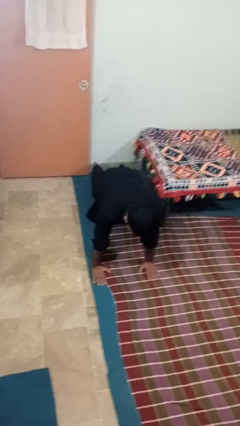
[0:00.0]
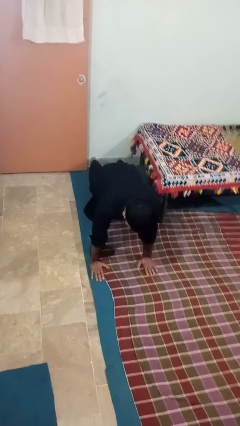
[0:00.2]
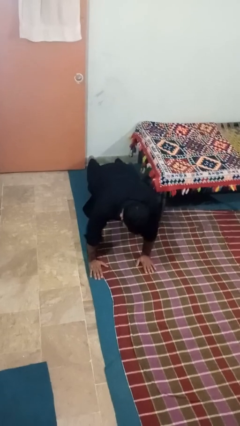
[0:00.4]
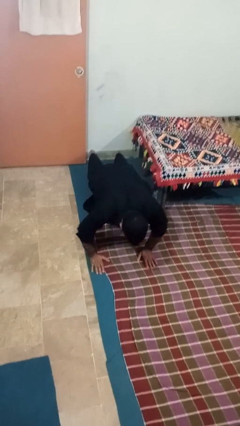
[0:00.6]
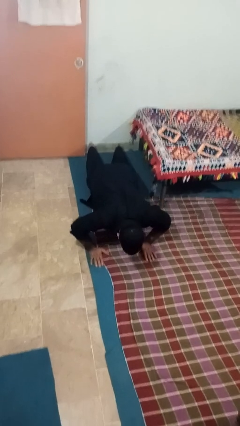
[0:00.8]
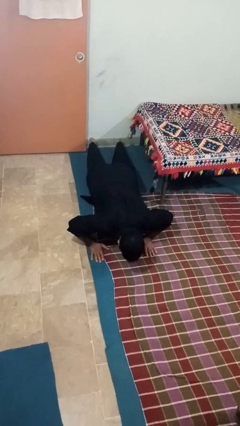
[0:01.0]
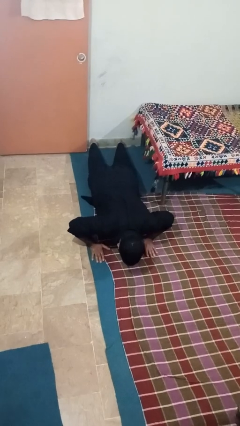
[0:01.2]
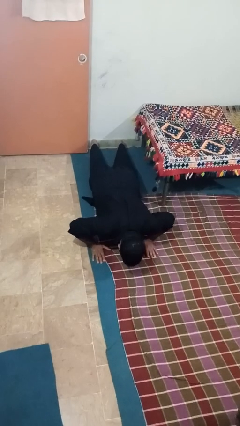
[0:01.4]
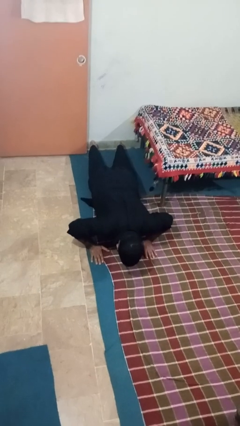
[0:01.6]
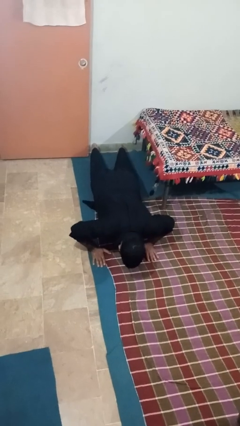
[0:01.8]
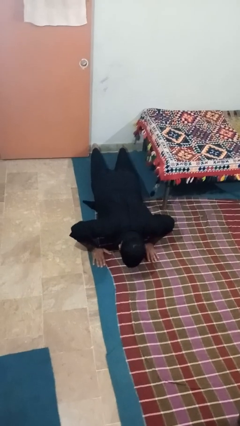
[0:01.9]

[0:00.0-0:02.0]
person exercises with pushup

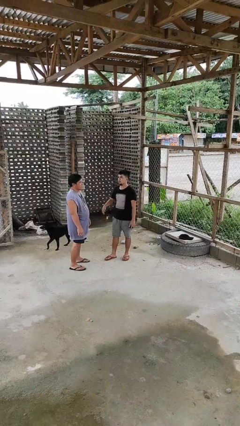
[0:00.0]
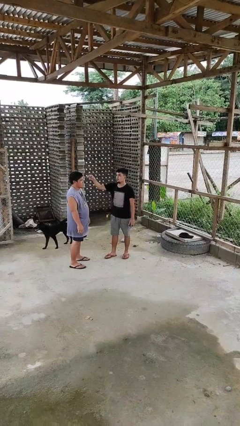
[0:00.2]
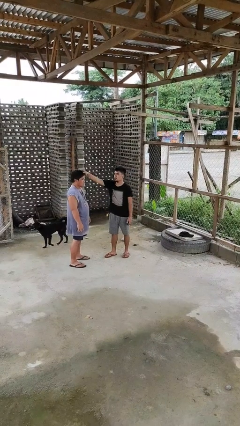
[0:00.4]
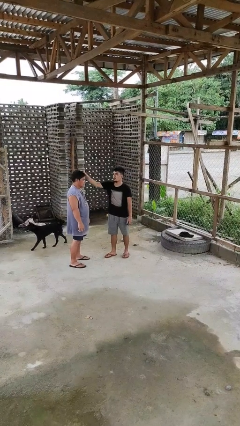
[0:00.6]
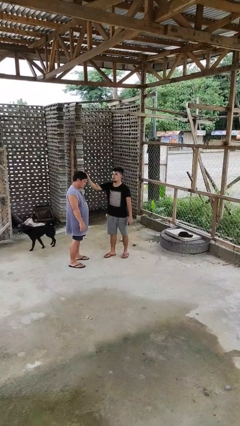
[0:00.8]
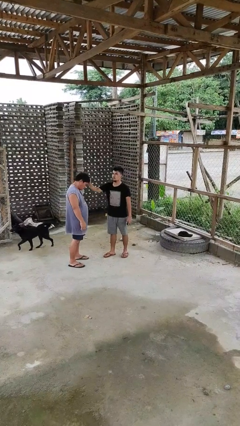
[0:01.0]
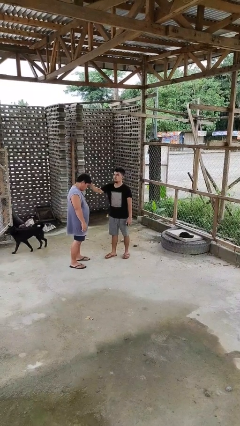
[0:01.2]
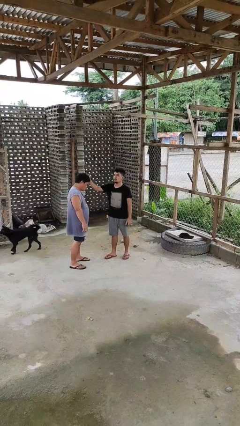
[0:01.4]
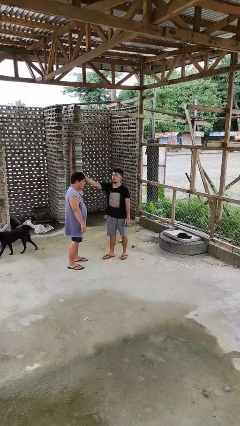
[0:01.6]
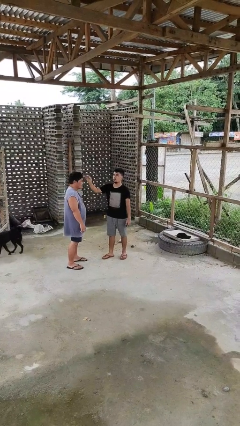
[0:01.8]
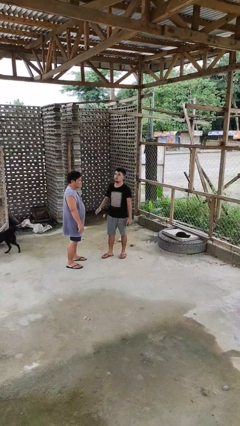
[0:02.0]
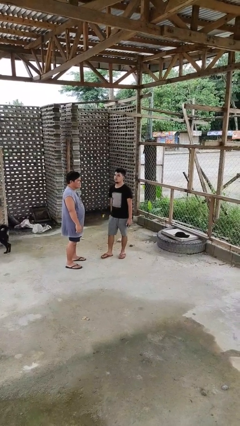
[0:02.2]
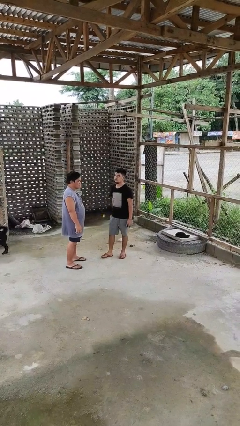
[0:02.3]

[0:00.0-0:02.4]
person grabs person by hair

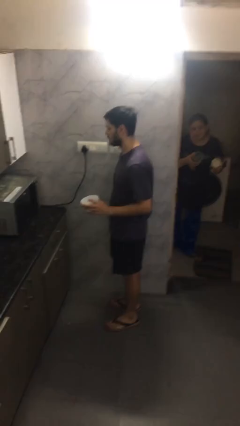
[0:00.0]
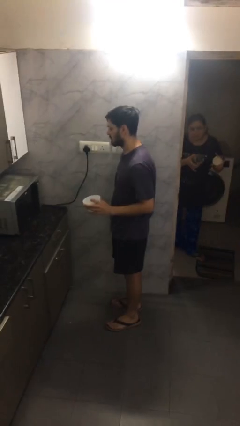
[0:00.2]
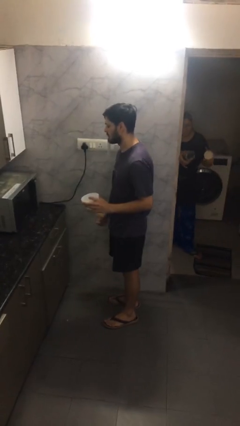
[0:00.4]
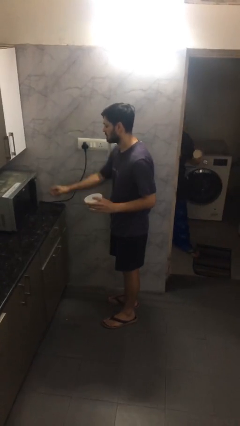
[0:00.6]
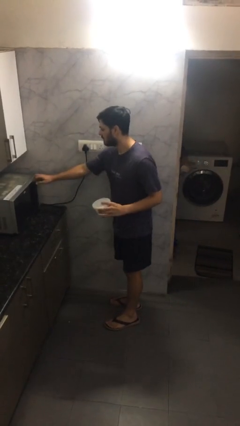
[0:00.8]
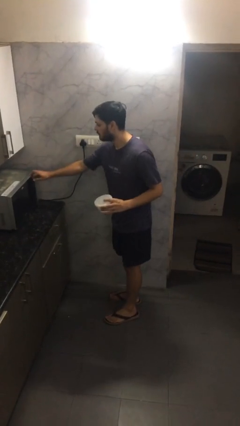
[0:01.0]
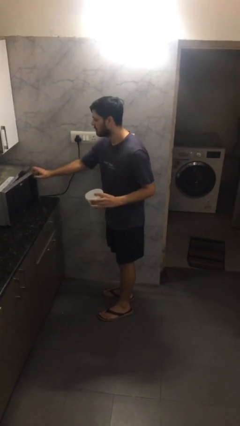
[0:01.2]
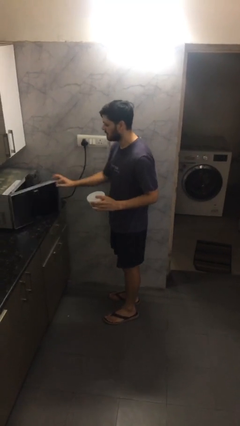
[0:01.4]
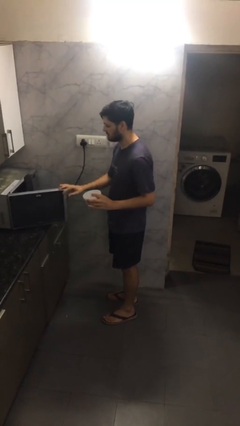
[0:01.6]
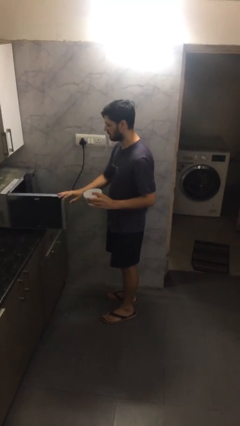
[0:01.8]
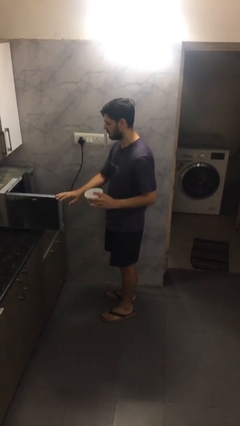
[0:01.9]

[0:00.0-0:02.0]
person opens microwave

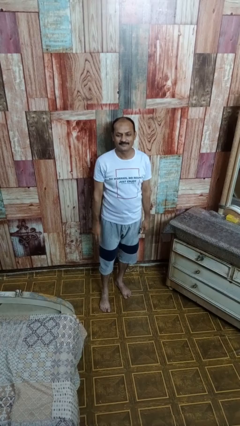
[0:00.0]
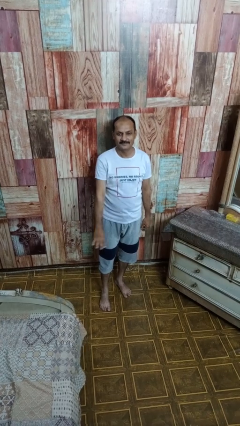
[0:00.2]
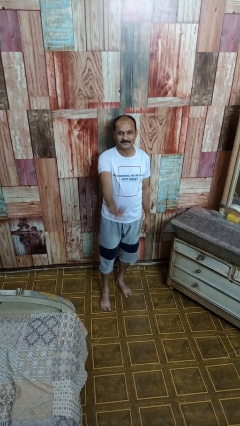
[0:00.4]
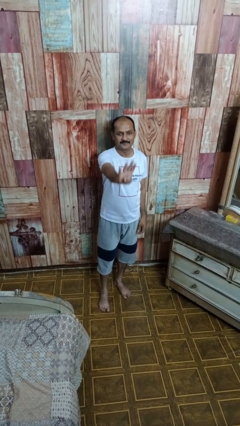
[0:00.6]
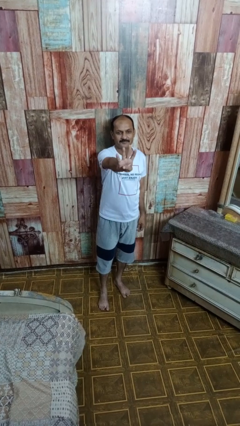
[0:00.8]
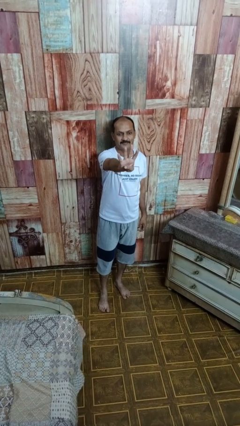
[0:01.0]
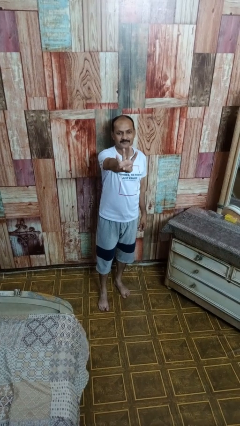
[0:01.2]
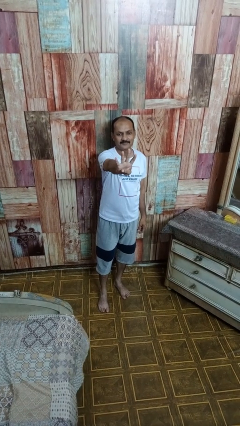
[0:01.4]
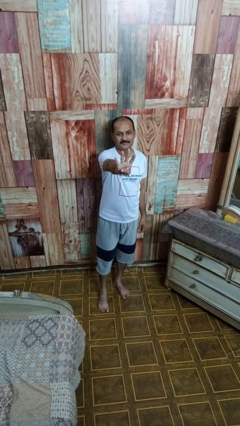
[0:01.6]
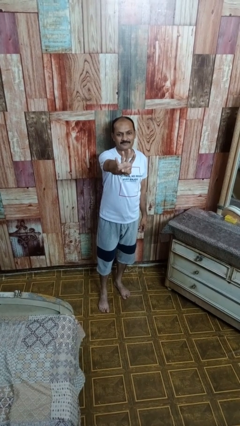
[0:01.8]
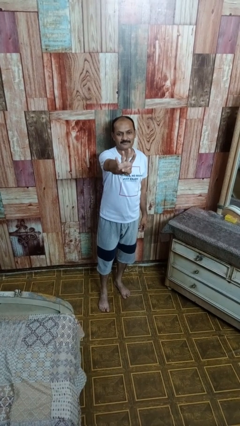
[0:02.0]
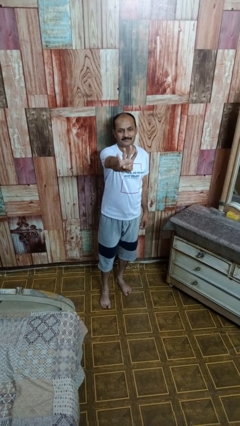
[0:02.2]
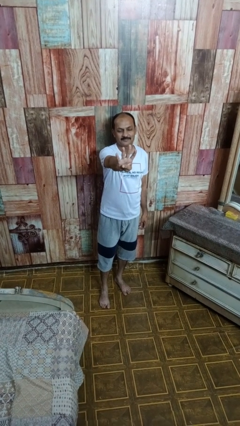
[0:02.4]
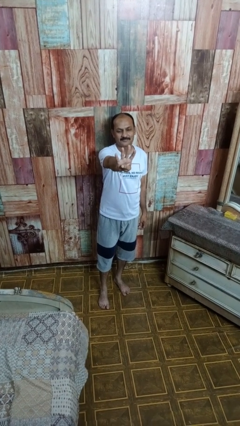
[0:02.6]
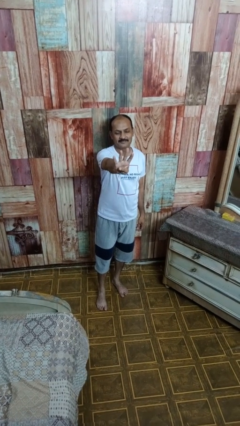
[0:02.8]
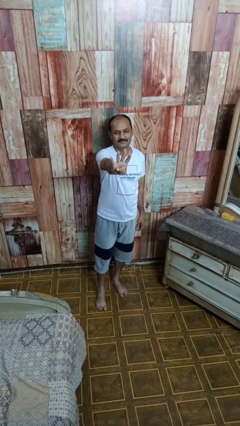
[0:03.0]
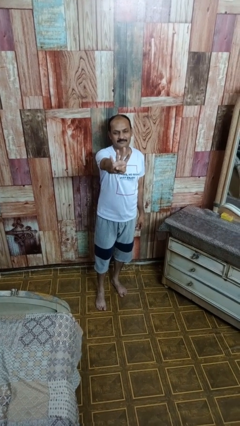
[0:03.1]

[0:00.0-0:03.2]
person gestures number four

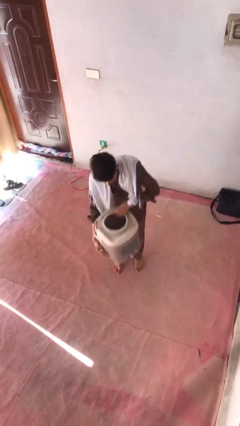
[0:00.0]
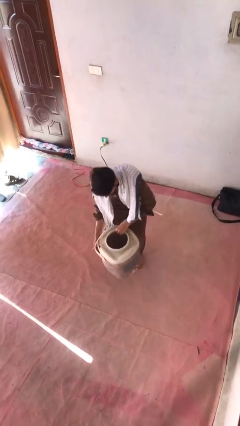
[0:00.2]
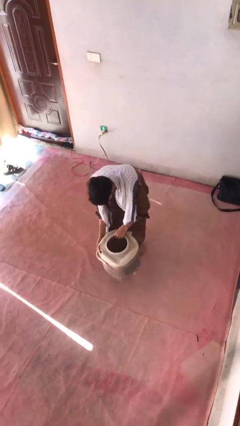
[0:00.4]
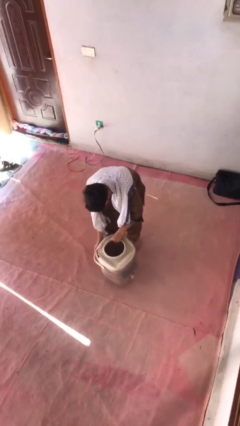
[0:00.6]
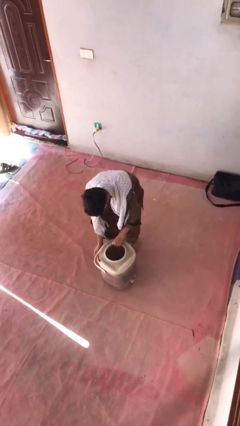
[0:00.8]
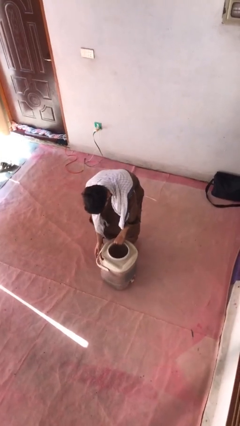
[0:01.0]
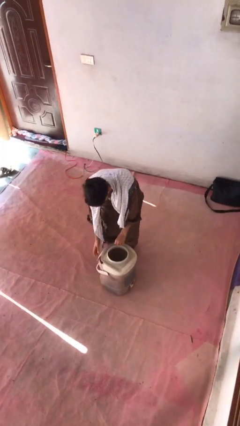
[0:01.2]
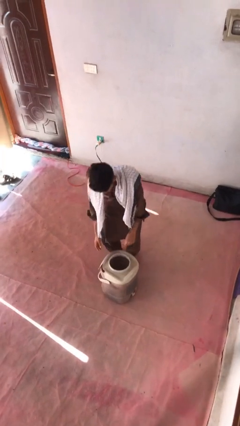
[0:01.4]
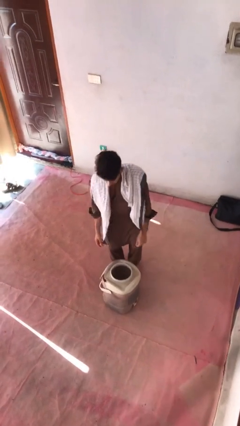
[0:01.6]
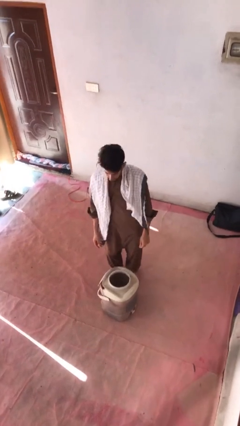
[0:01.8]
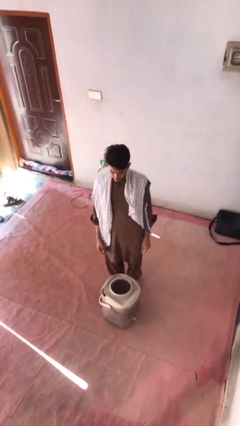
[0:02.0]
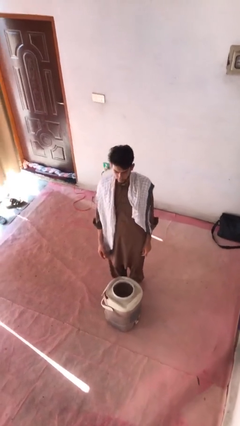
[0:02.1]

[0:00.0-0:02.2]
person puts down object on floor

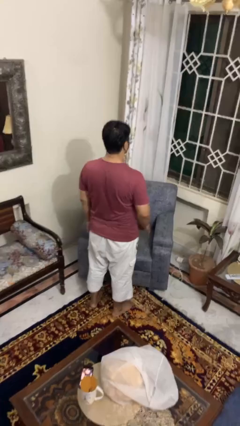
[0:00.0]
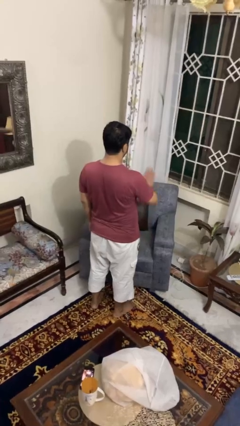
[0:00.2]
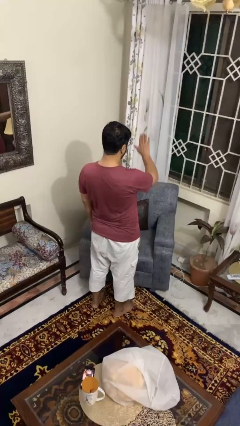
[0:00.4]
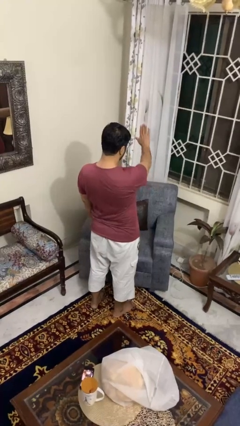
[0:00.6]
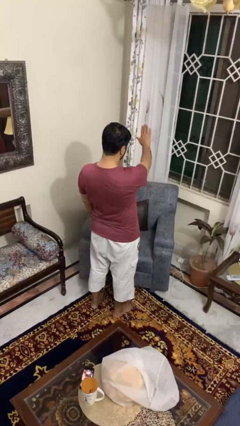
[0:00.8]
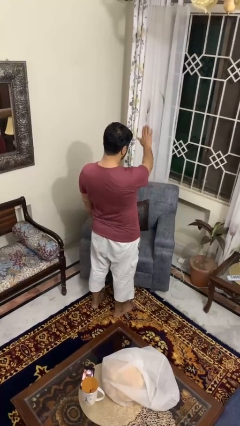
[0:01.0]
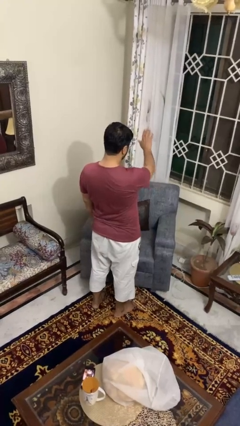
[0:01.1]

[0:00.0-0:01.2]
person gestures stop

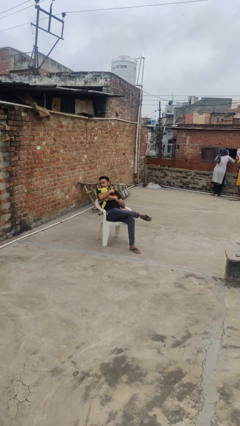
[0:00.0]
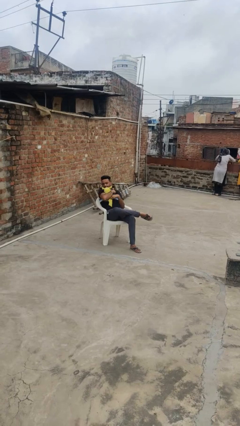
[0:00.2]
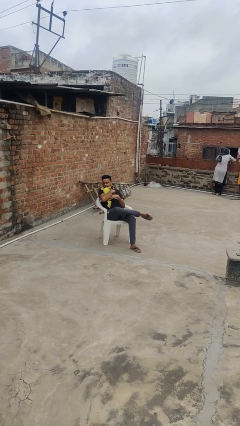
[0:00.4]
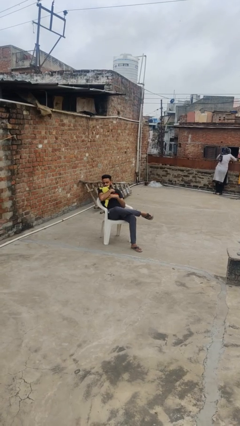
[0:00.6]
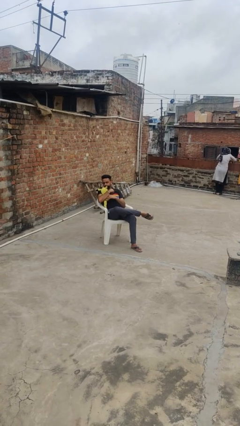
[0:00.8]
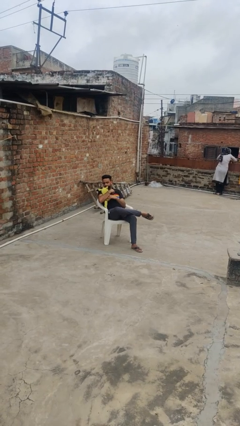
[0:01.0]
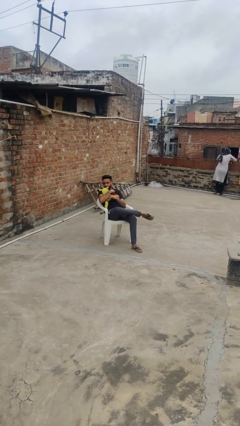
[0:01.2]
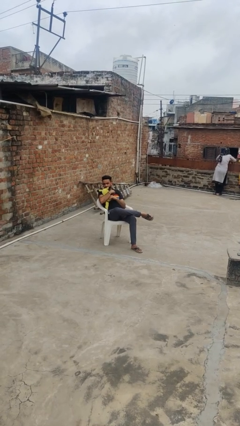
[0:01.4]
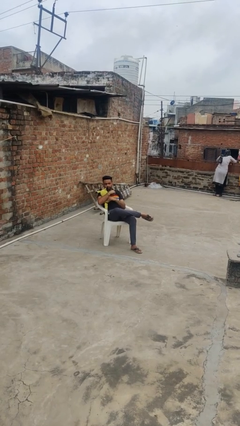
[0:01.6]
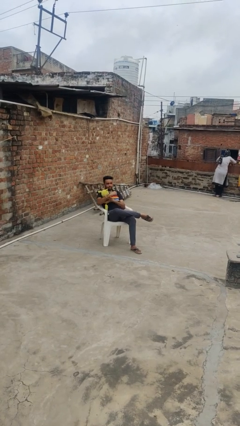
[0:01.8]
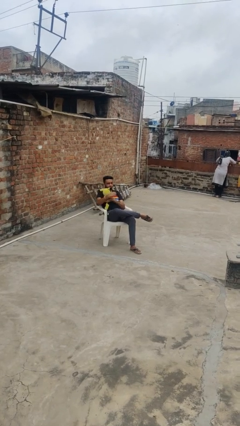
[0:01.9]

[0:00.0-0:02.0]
person hugs stuffed animal

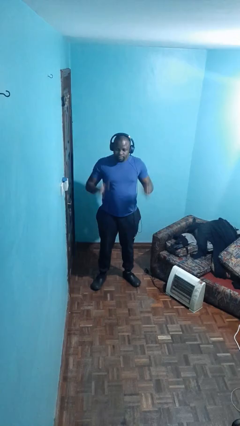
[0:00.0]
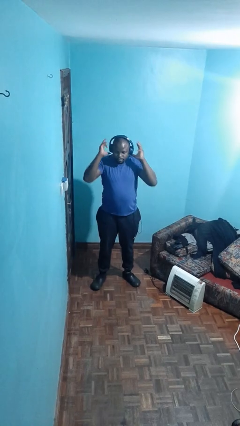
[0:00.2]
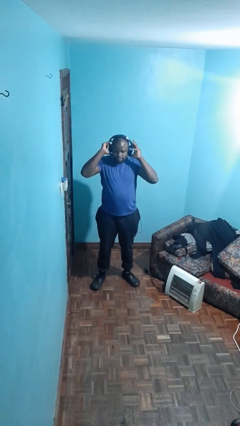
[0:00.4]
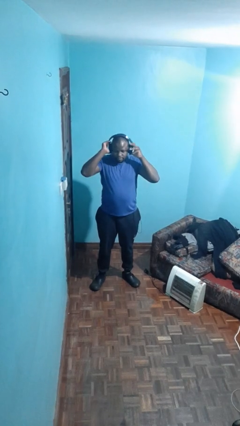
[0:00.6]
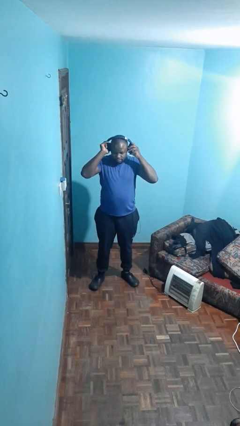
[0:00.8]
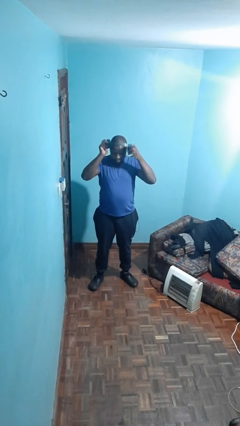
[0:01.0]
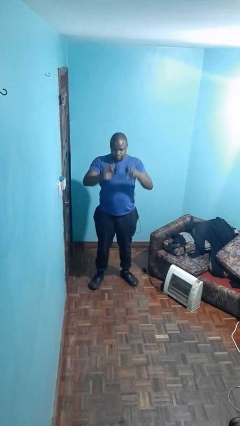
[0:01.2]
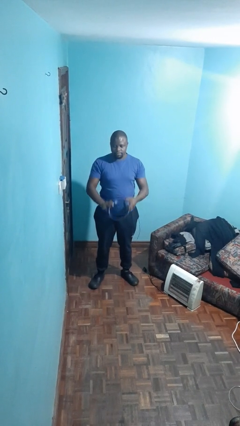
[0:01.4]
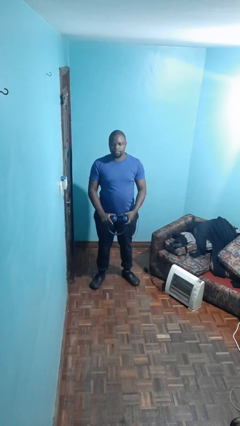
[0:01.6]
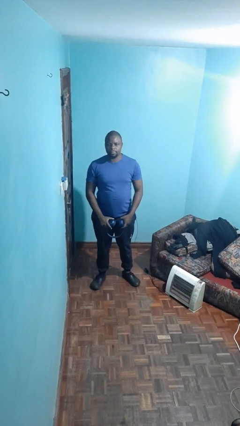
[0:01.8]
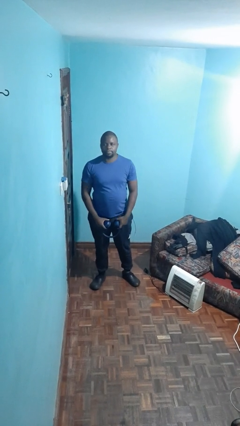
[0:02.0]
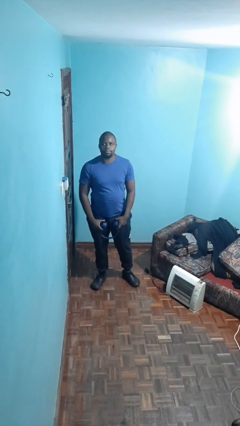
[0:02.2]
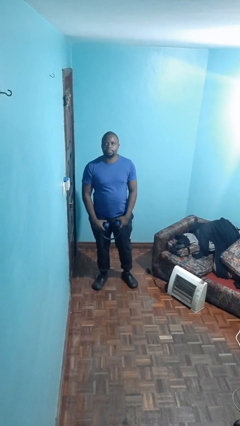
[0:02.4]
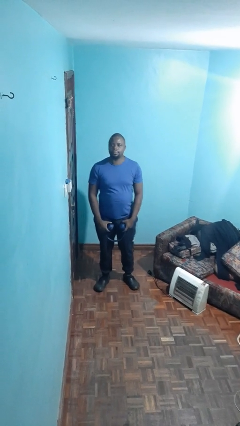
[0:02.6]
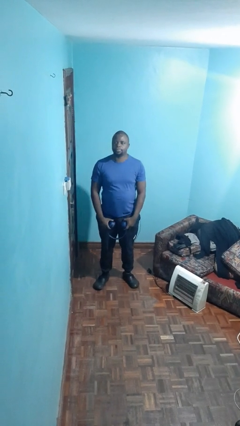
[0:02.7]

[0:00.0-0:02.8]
person takes off headphones
